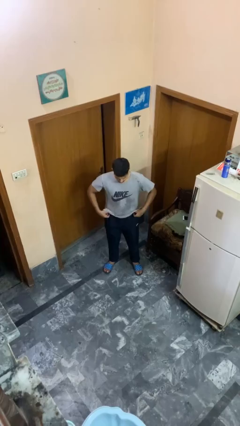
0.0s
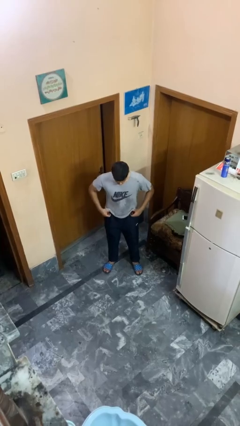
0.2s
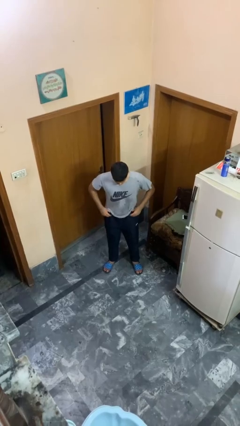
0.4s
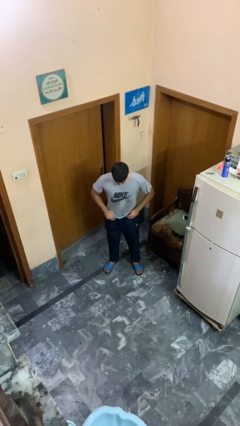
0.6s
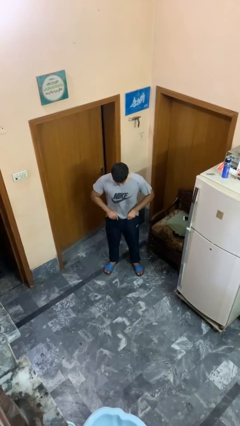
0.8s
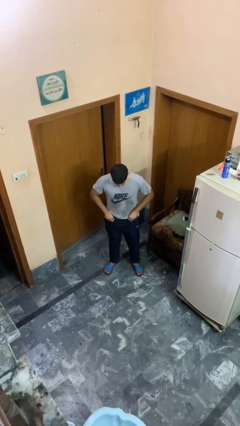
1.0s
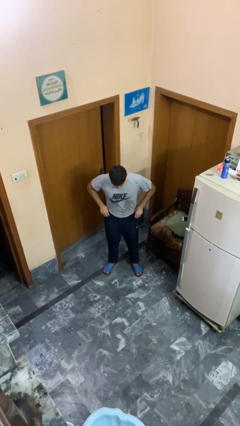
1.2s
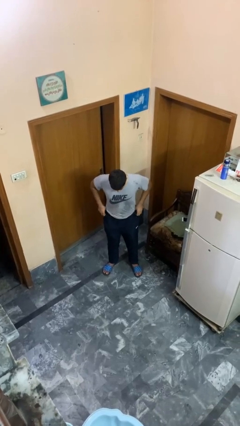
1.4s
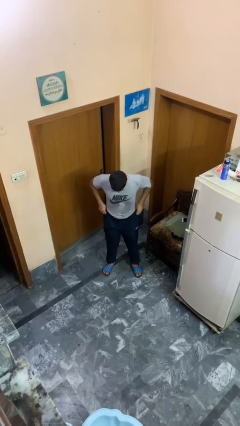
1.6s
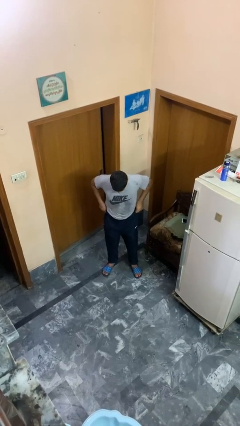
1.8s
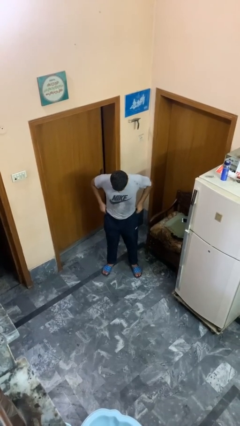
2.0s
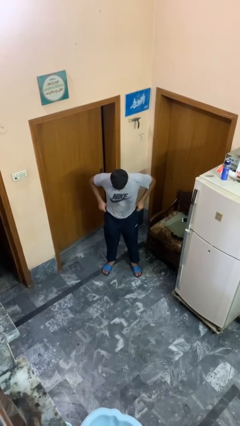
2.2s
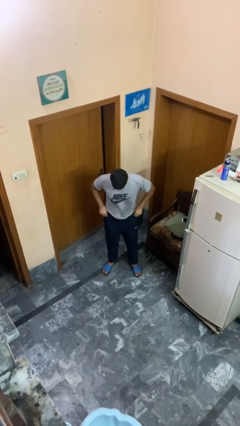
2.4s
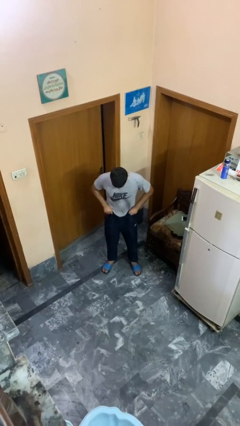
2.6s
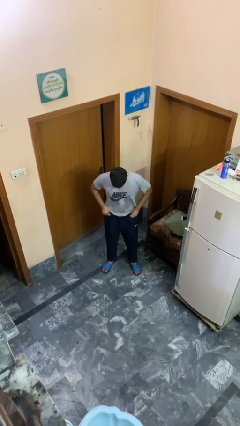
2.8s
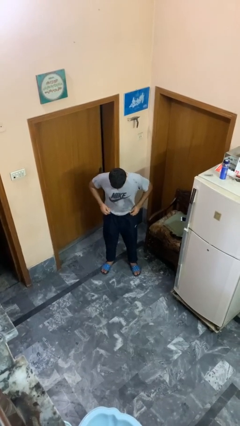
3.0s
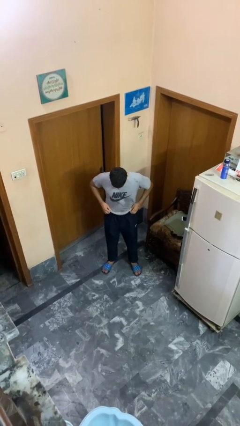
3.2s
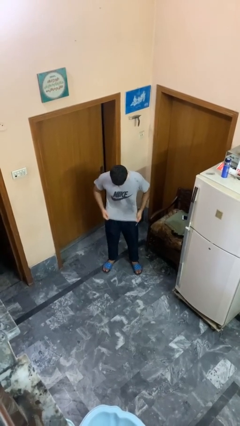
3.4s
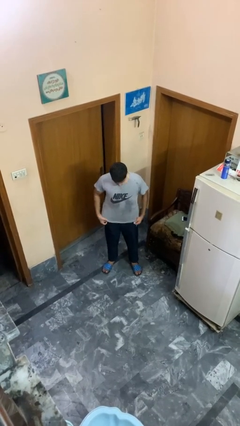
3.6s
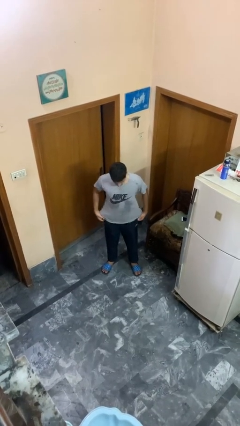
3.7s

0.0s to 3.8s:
person hikes up pants

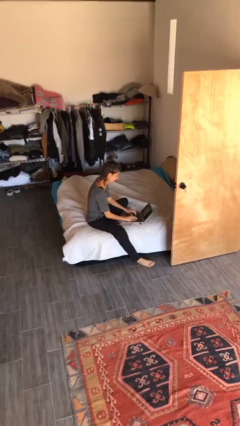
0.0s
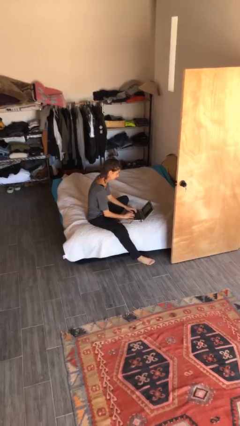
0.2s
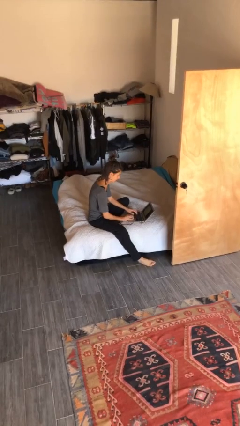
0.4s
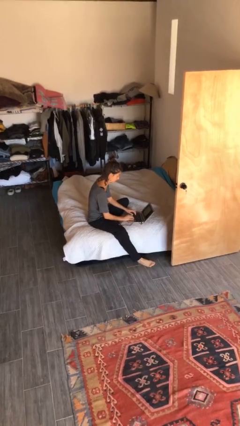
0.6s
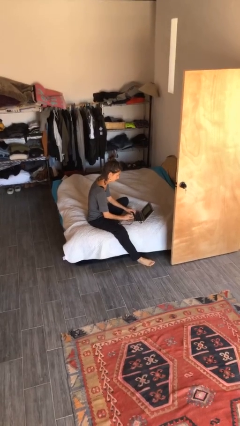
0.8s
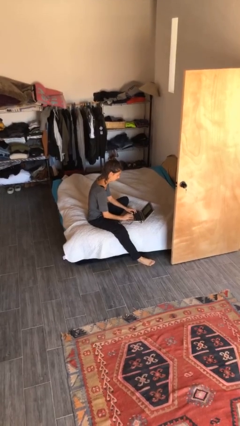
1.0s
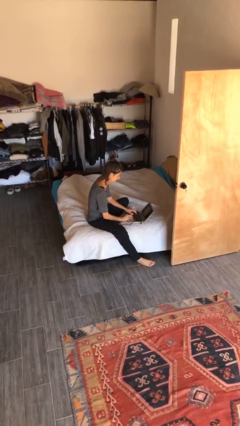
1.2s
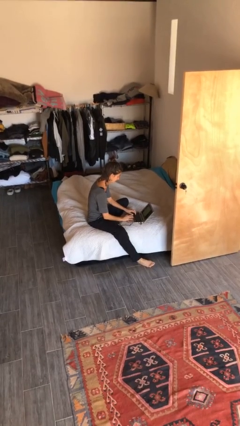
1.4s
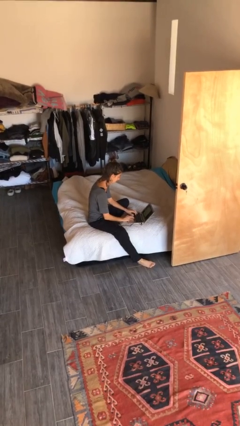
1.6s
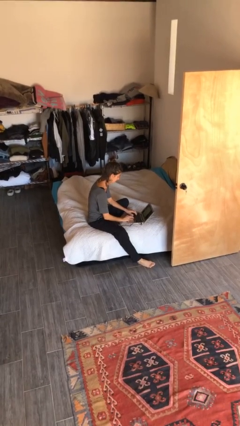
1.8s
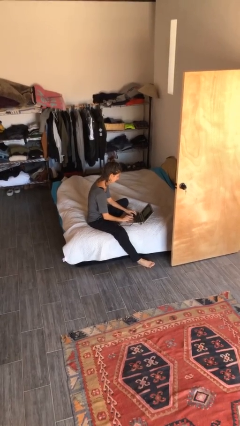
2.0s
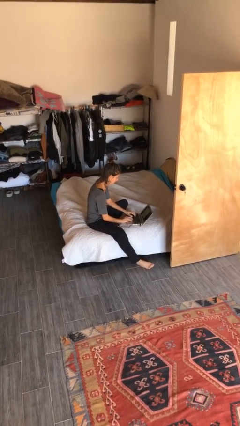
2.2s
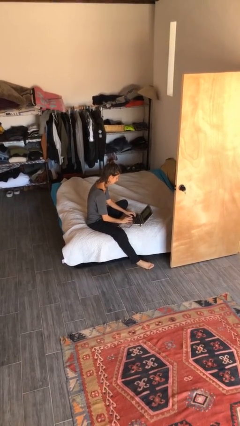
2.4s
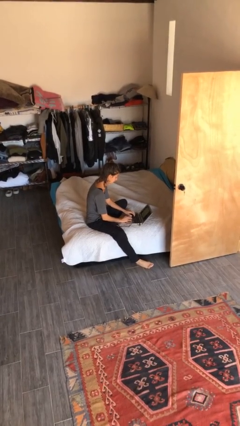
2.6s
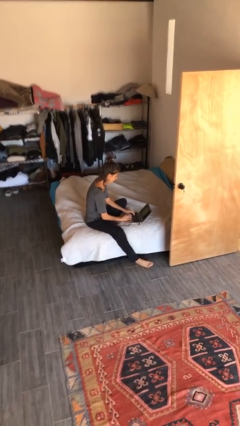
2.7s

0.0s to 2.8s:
person interacts with laptop

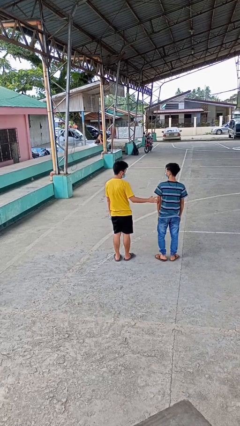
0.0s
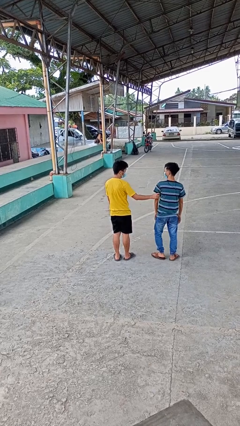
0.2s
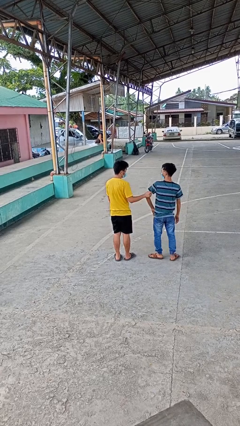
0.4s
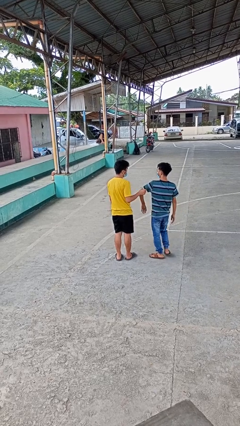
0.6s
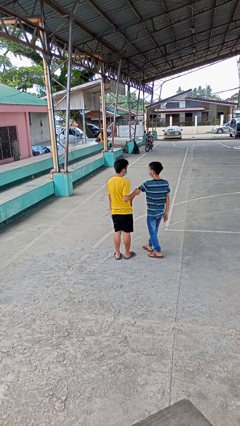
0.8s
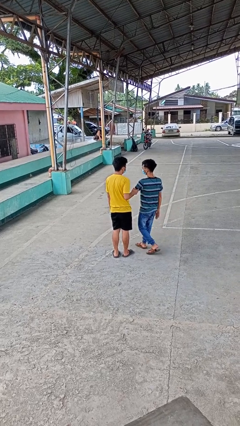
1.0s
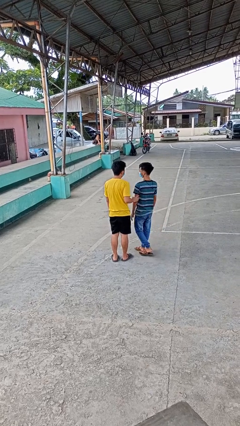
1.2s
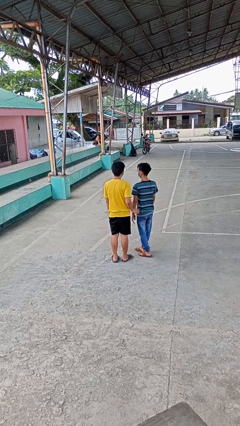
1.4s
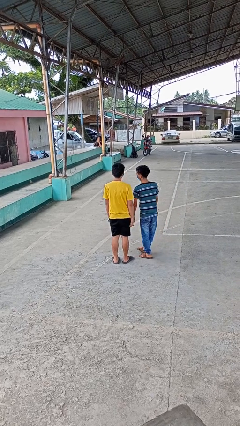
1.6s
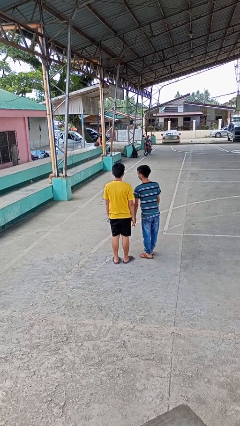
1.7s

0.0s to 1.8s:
person grabs person by bicep

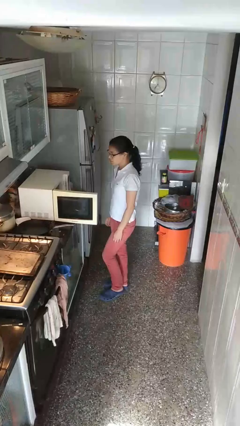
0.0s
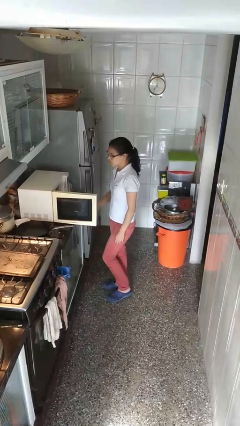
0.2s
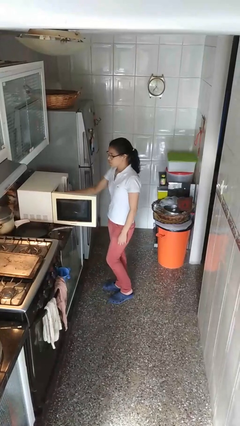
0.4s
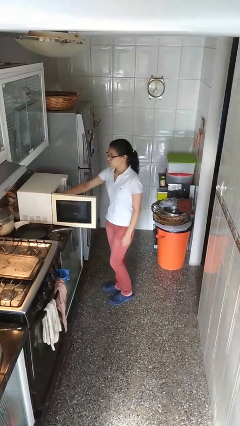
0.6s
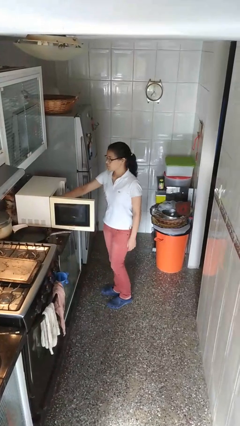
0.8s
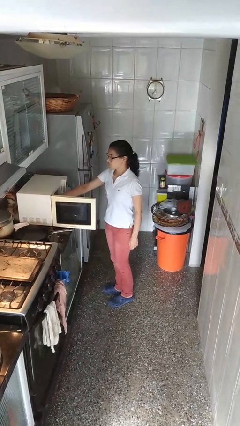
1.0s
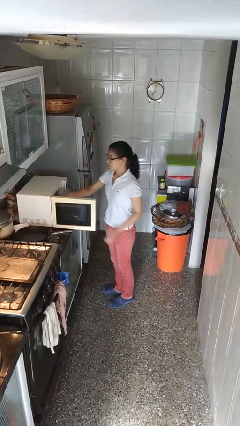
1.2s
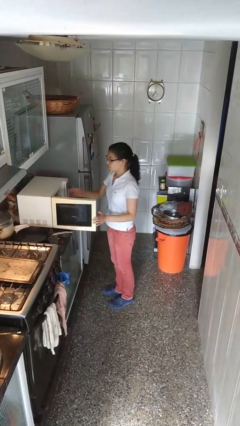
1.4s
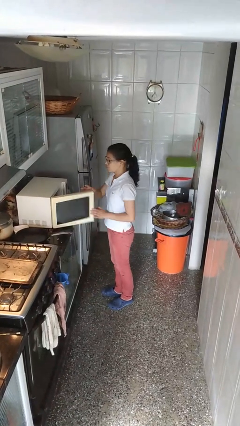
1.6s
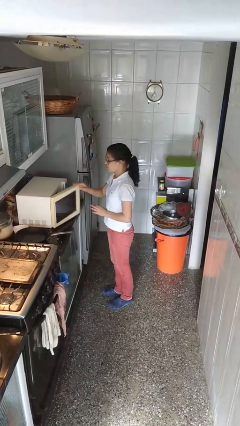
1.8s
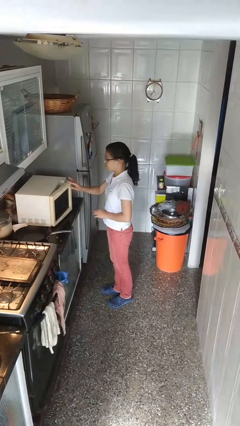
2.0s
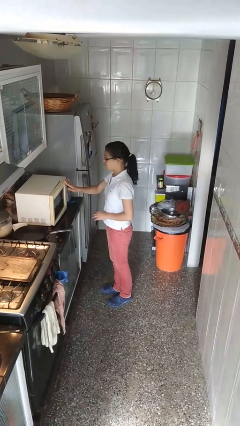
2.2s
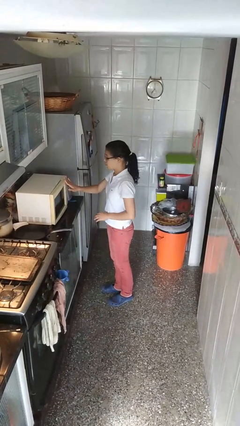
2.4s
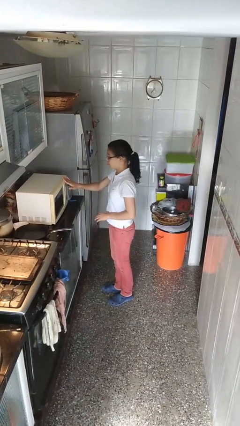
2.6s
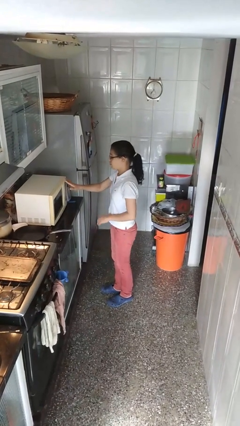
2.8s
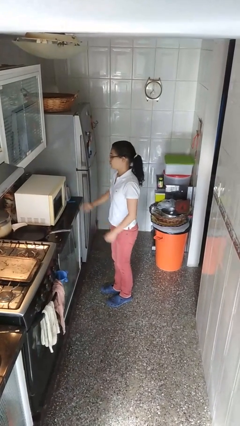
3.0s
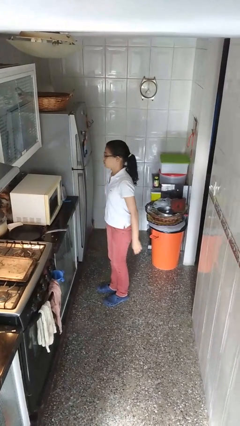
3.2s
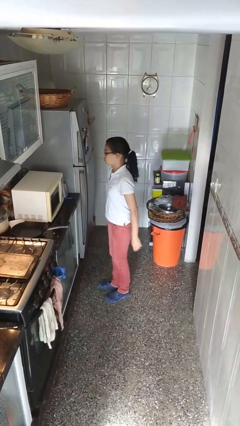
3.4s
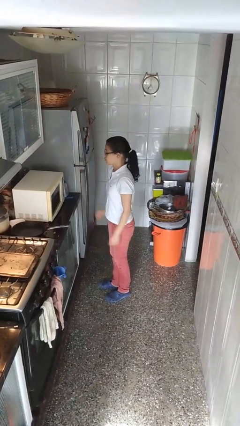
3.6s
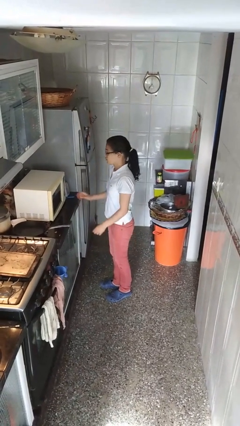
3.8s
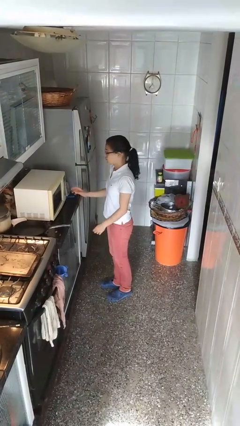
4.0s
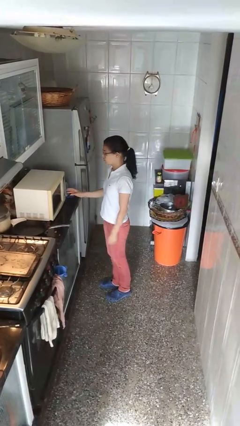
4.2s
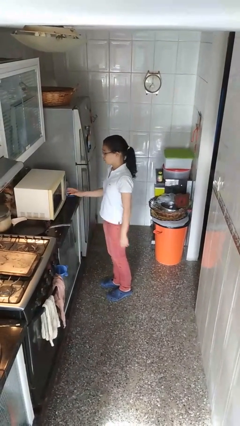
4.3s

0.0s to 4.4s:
person closes microwave

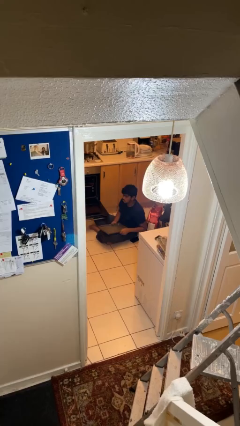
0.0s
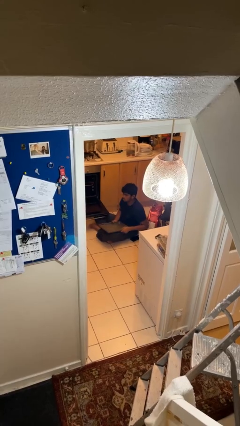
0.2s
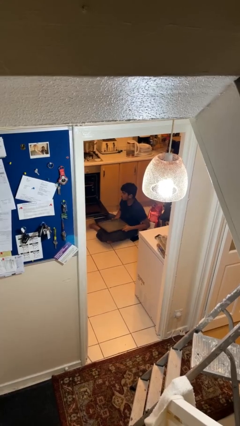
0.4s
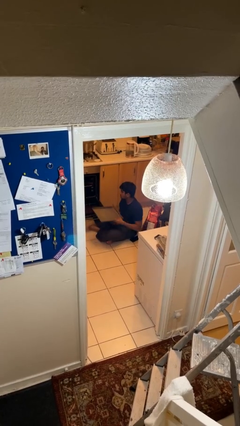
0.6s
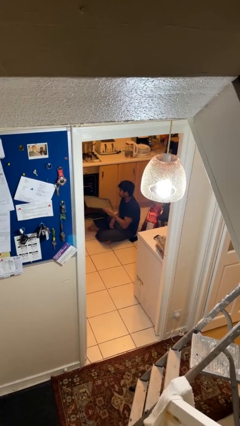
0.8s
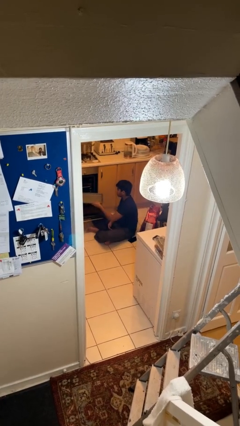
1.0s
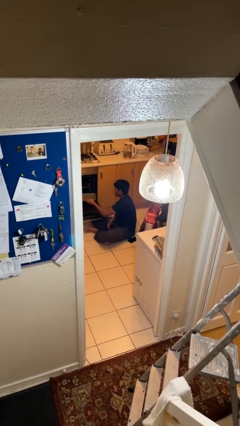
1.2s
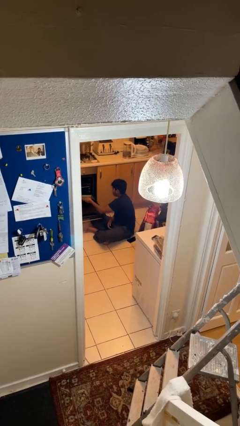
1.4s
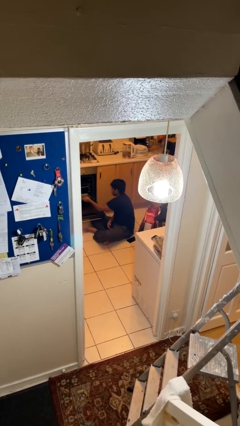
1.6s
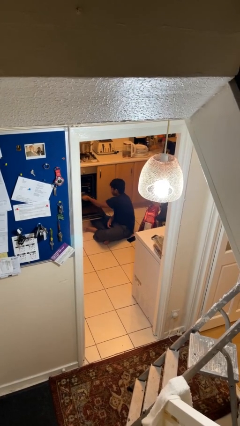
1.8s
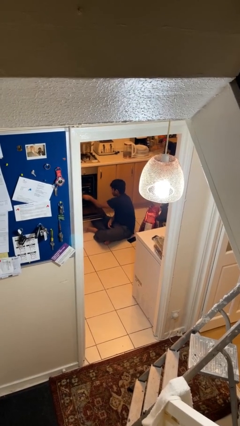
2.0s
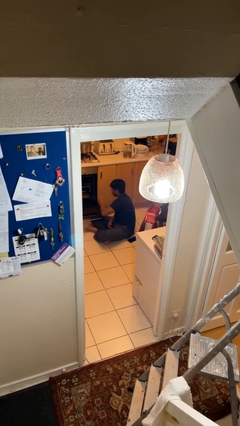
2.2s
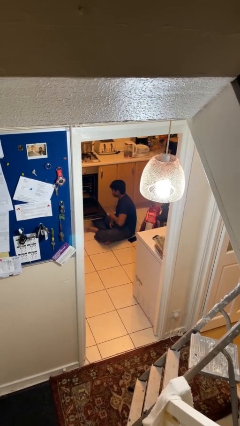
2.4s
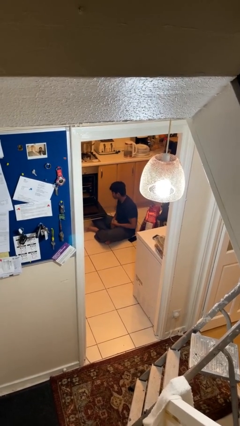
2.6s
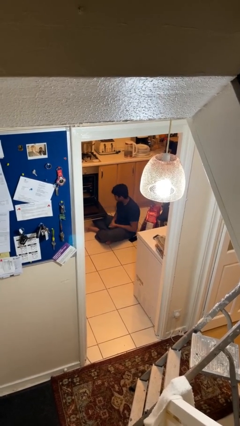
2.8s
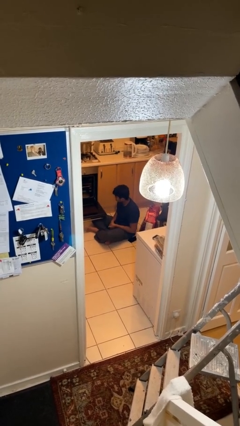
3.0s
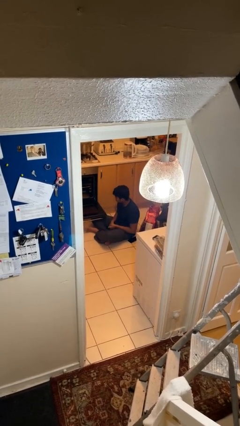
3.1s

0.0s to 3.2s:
person puts object into oven

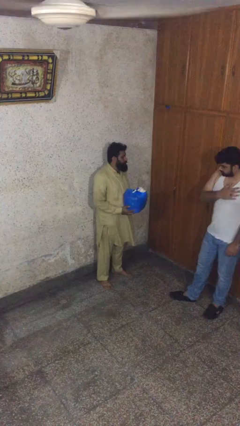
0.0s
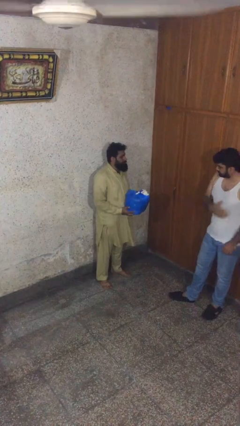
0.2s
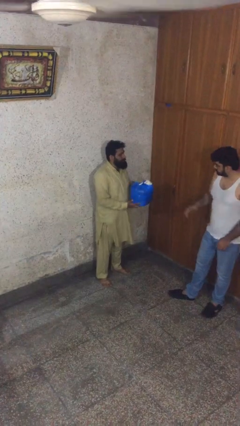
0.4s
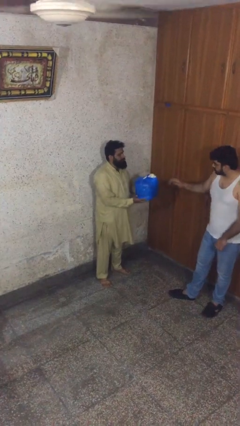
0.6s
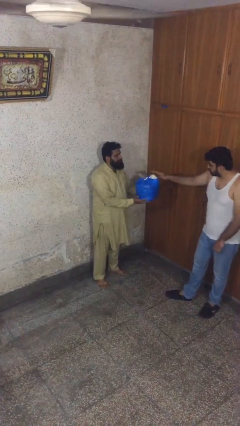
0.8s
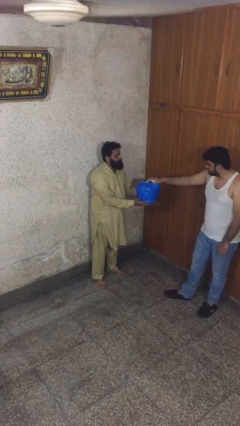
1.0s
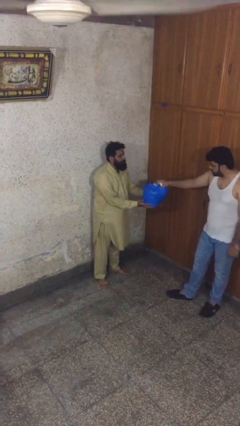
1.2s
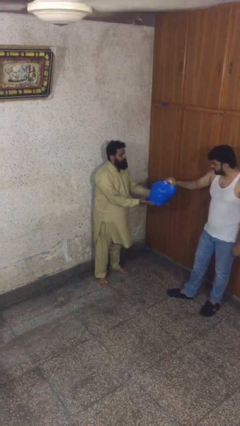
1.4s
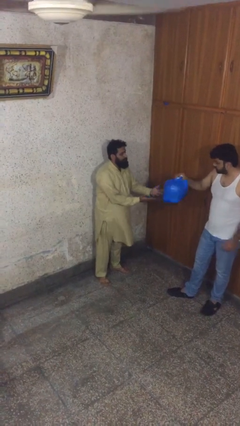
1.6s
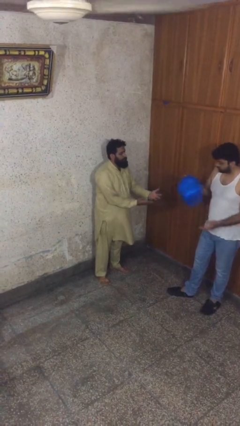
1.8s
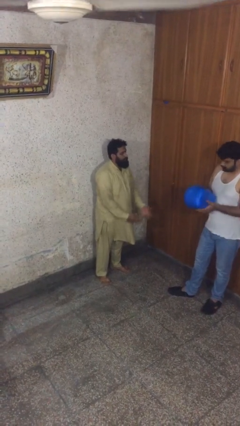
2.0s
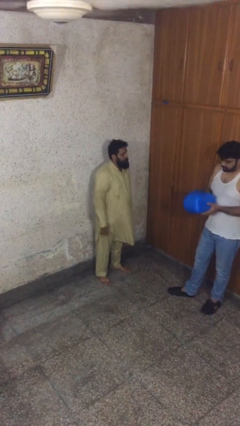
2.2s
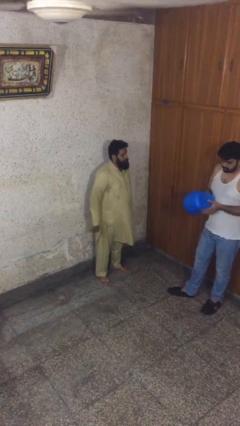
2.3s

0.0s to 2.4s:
person transfers object to person
